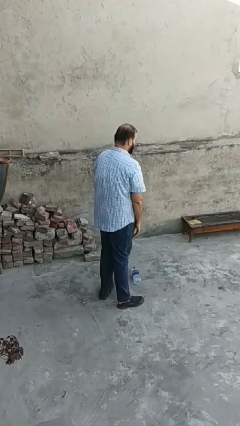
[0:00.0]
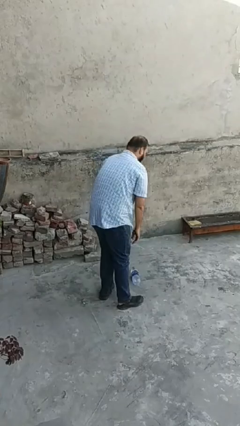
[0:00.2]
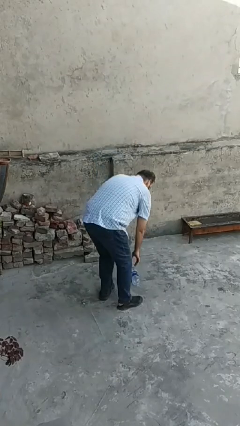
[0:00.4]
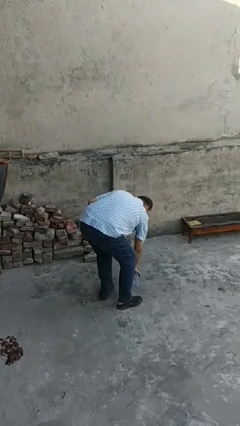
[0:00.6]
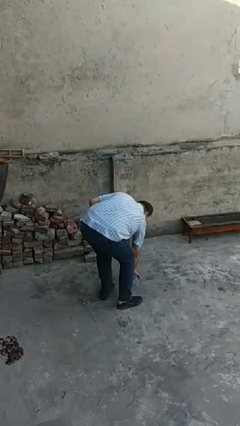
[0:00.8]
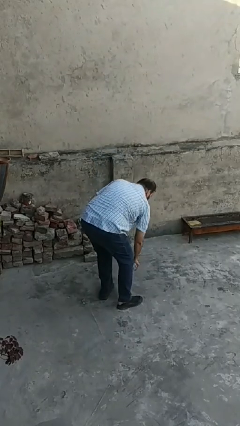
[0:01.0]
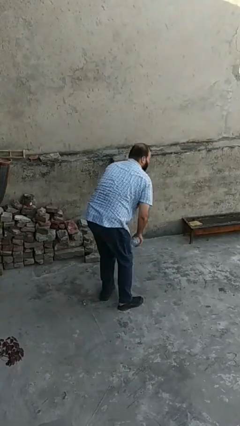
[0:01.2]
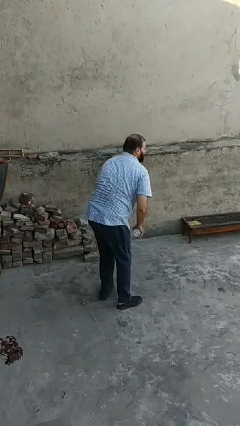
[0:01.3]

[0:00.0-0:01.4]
person picks up object from floor

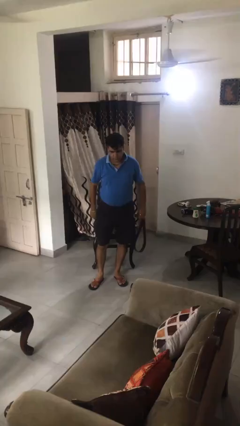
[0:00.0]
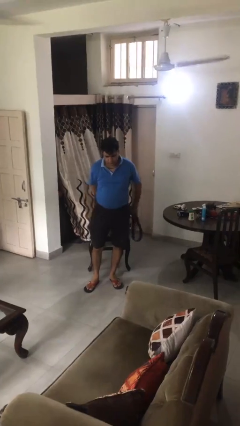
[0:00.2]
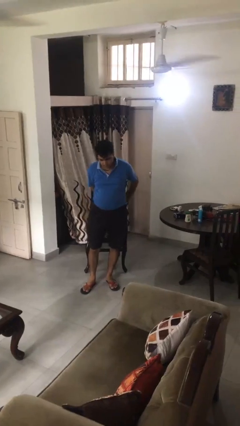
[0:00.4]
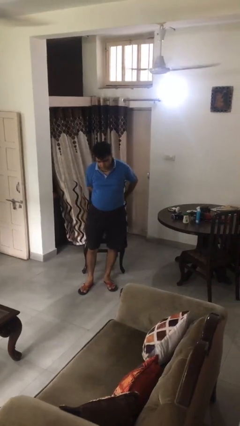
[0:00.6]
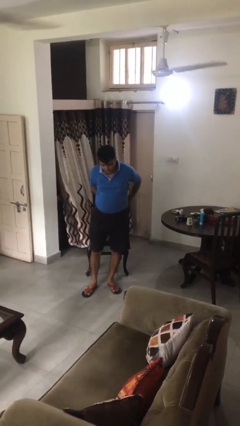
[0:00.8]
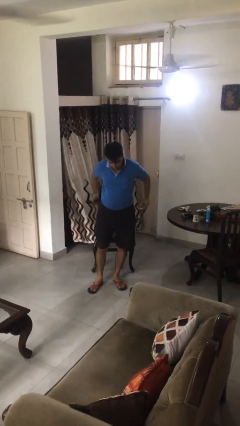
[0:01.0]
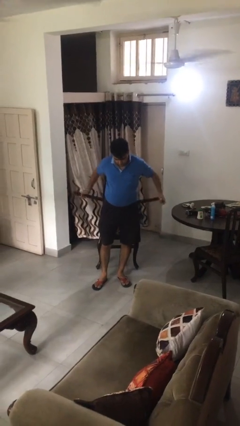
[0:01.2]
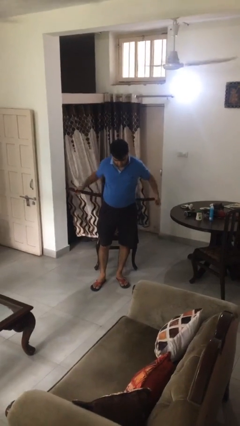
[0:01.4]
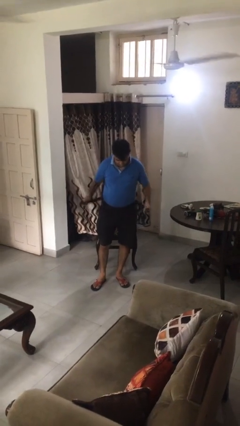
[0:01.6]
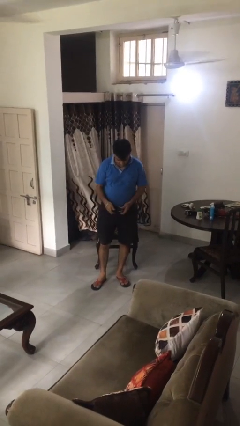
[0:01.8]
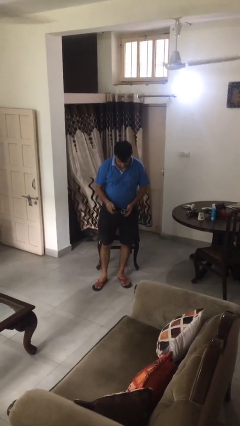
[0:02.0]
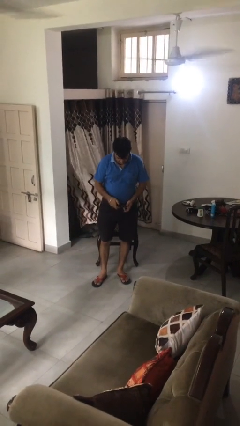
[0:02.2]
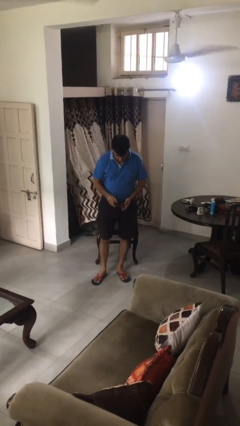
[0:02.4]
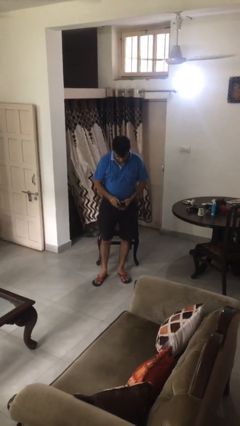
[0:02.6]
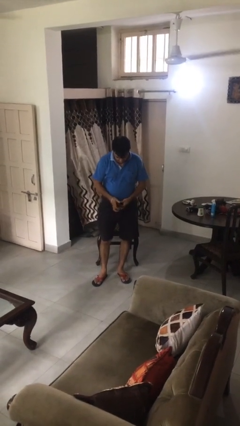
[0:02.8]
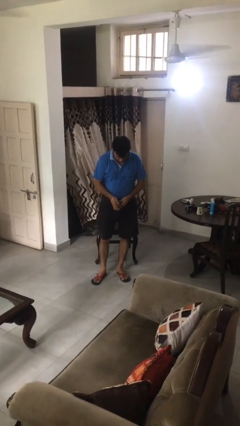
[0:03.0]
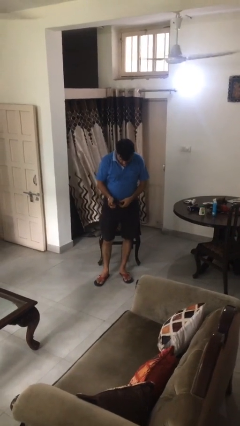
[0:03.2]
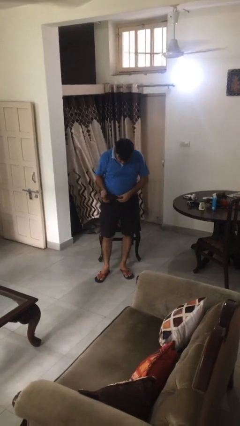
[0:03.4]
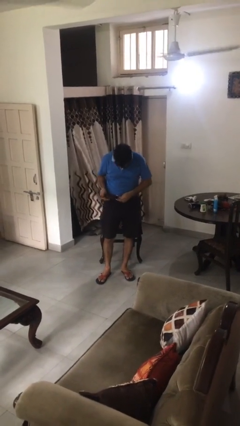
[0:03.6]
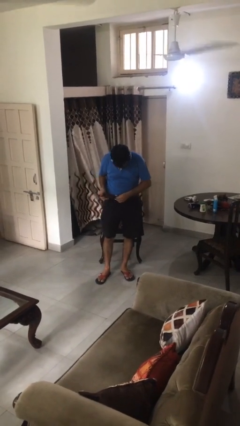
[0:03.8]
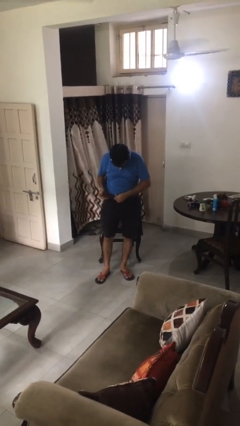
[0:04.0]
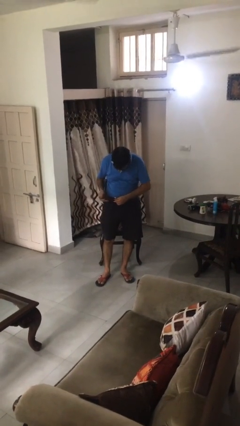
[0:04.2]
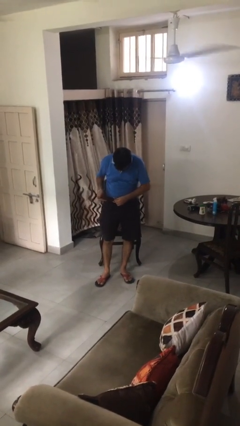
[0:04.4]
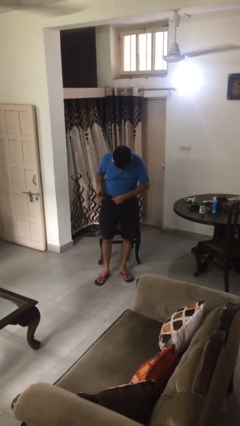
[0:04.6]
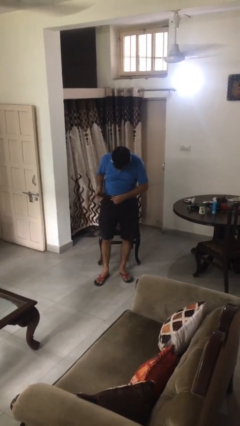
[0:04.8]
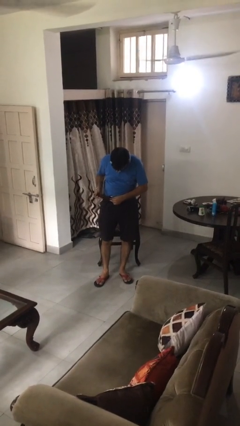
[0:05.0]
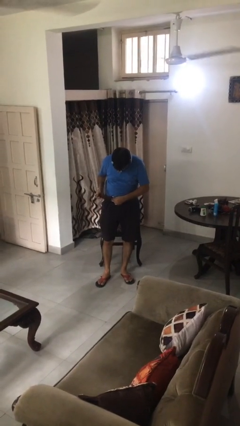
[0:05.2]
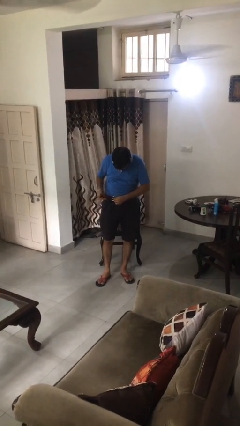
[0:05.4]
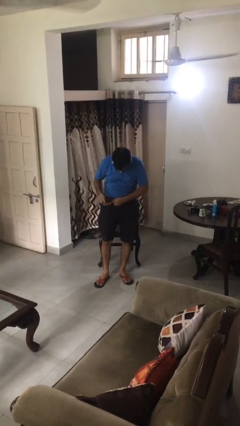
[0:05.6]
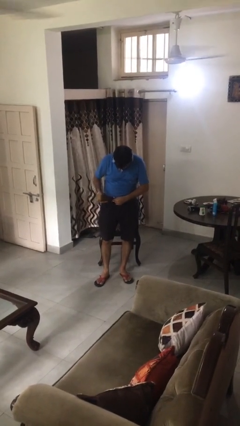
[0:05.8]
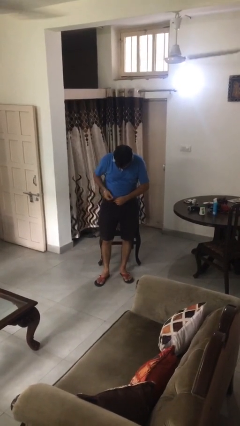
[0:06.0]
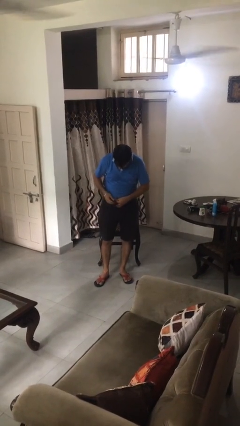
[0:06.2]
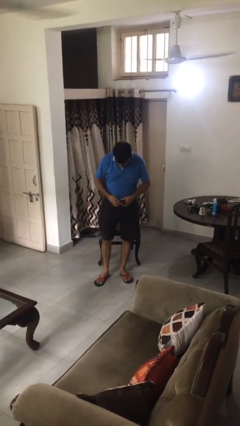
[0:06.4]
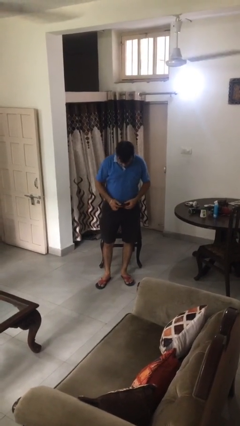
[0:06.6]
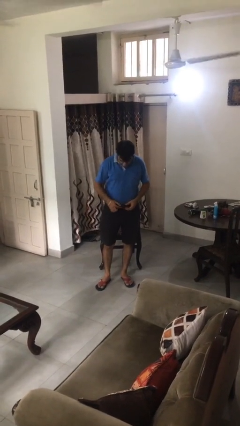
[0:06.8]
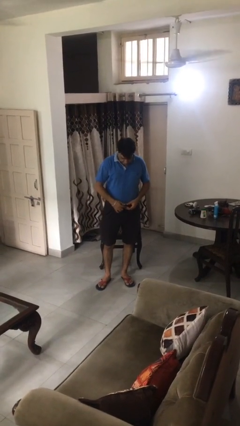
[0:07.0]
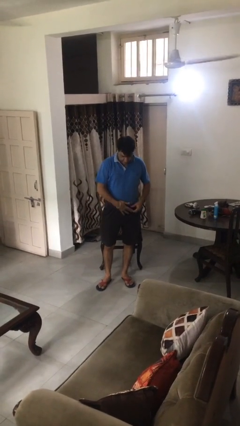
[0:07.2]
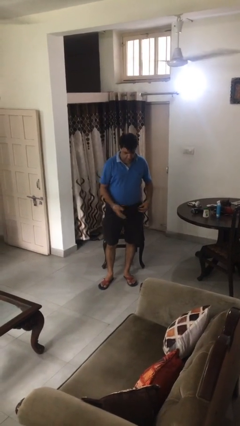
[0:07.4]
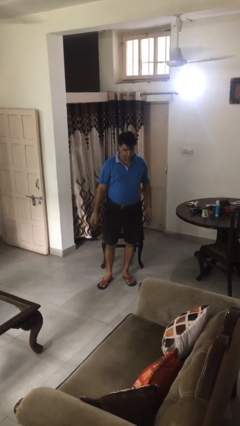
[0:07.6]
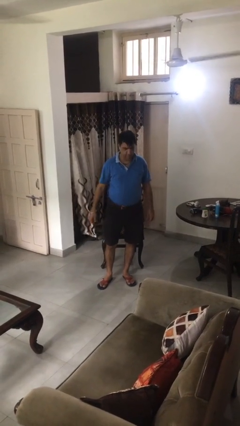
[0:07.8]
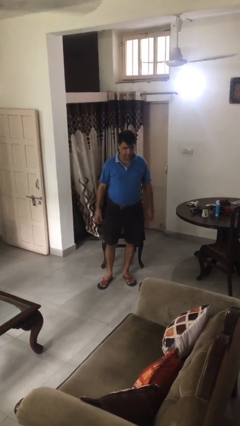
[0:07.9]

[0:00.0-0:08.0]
person puts on belt

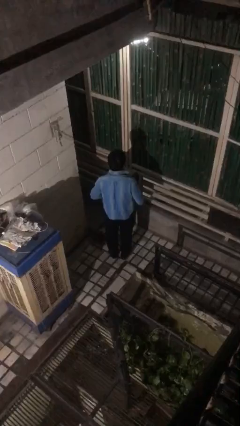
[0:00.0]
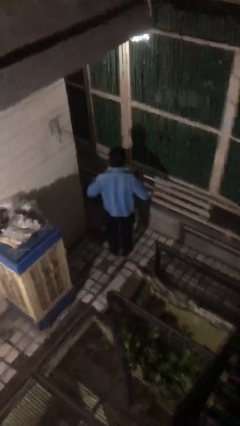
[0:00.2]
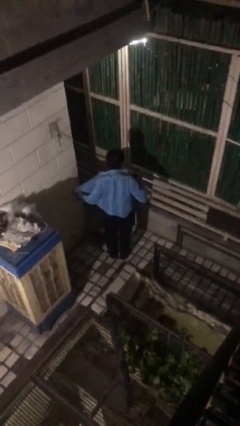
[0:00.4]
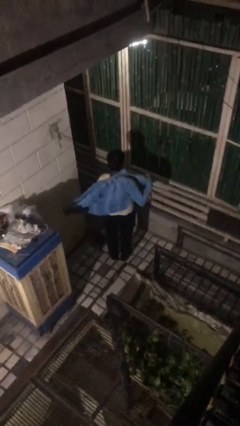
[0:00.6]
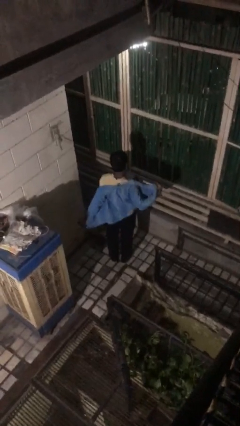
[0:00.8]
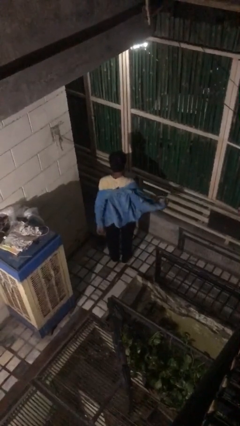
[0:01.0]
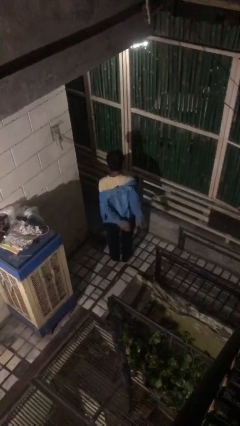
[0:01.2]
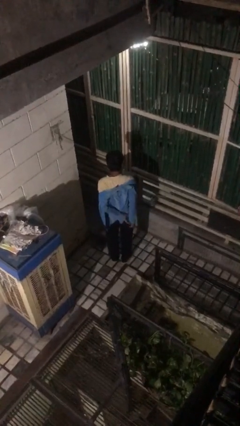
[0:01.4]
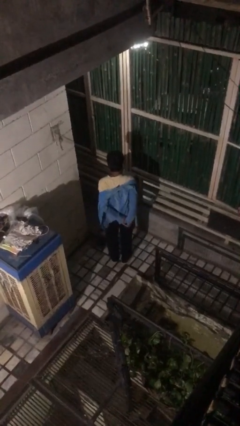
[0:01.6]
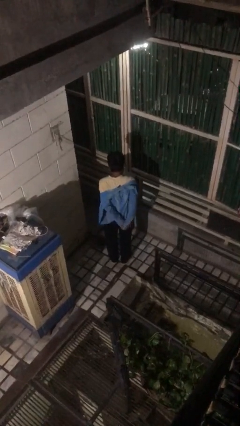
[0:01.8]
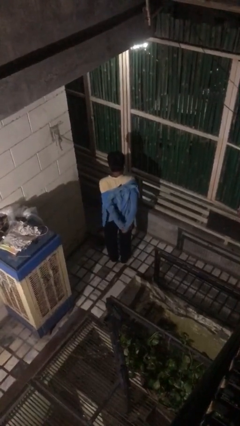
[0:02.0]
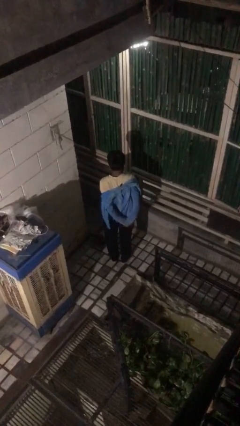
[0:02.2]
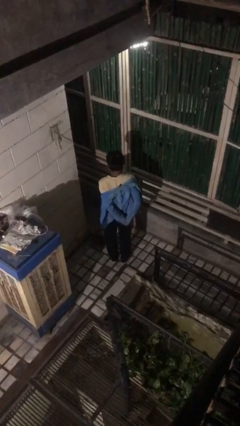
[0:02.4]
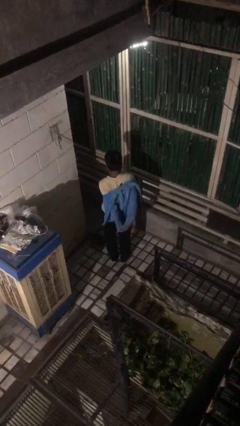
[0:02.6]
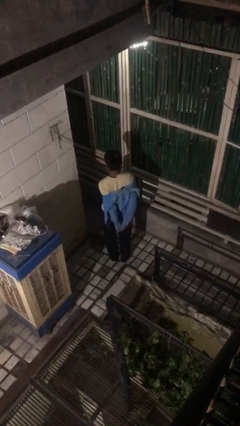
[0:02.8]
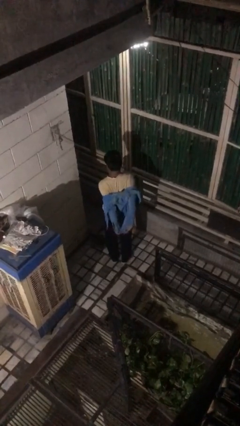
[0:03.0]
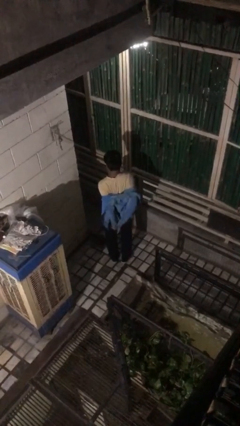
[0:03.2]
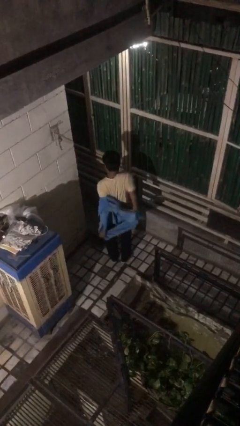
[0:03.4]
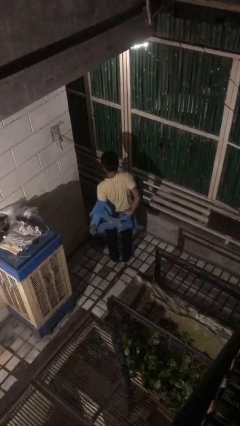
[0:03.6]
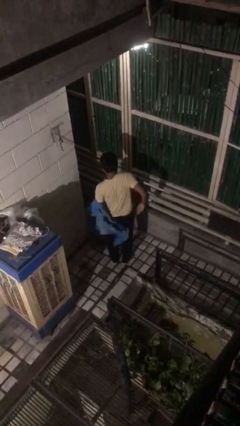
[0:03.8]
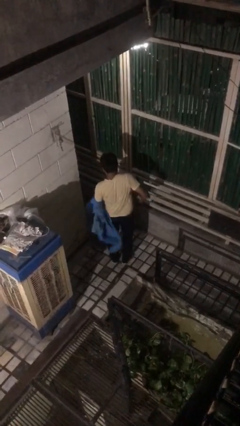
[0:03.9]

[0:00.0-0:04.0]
person takes off shirt

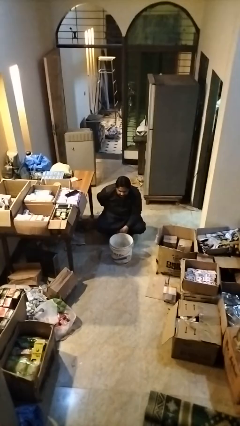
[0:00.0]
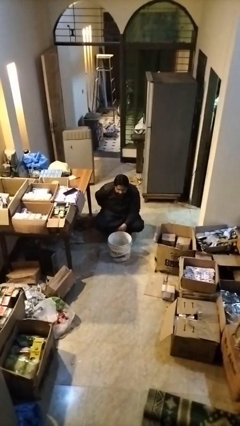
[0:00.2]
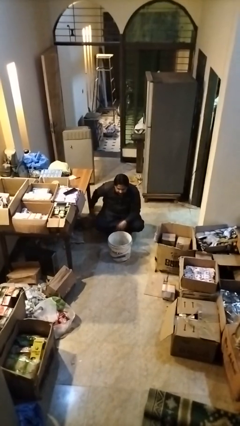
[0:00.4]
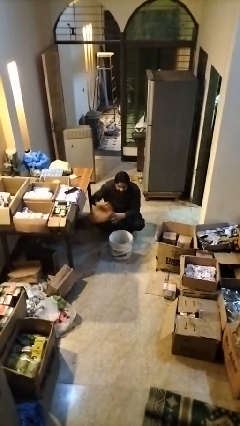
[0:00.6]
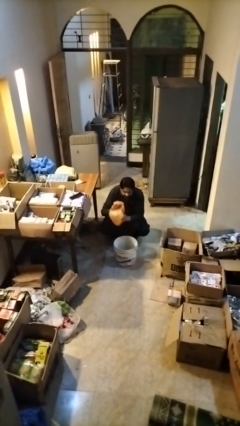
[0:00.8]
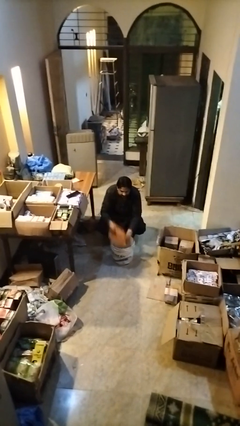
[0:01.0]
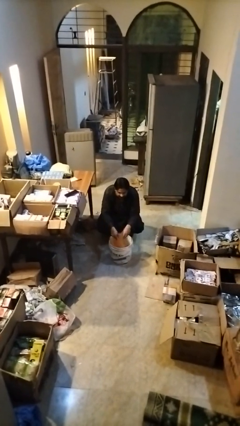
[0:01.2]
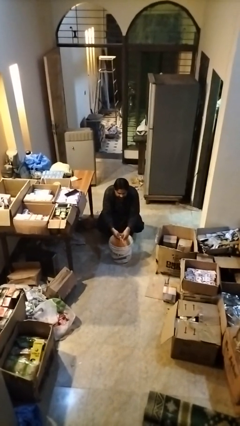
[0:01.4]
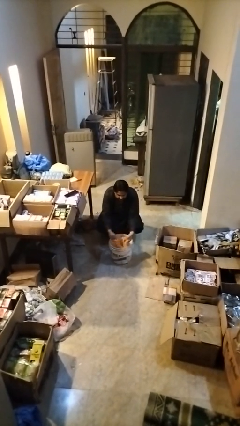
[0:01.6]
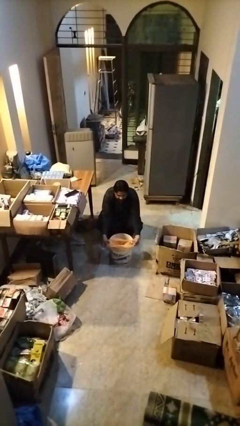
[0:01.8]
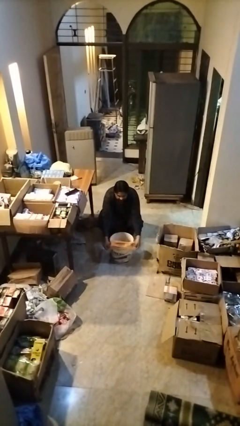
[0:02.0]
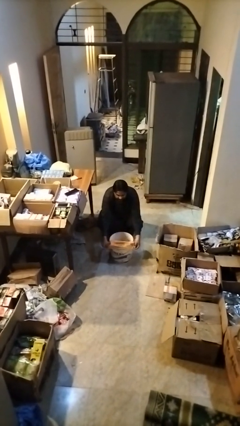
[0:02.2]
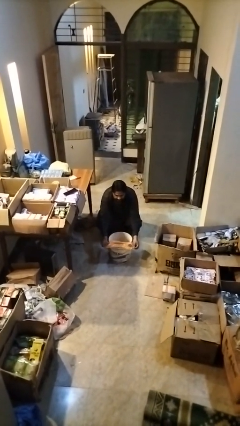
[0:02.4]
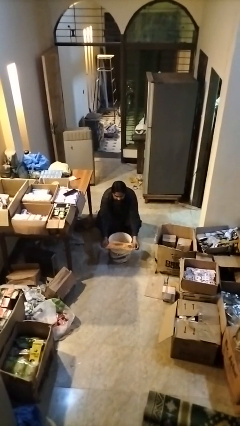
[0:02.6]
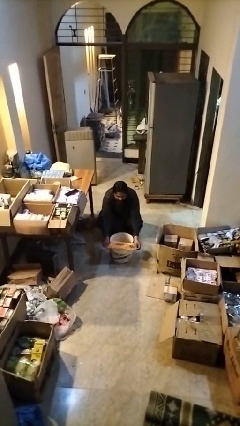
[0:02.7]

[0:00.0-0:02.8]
person inserts trashbag into trashcan

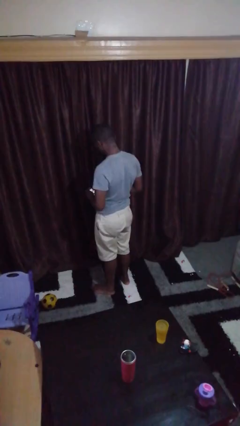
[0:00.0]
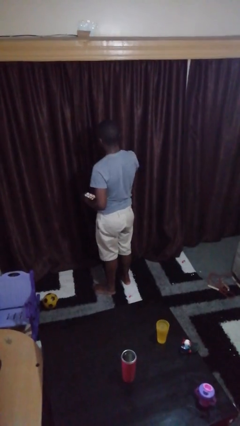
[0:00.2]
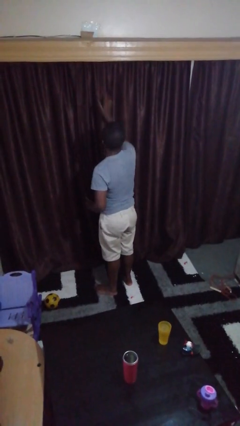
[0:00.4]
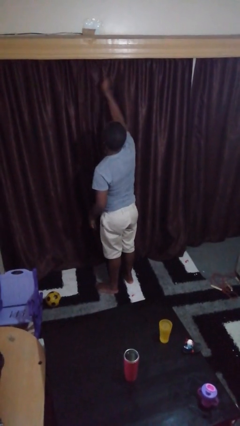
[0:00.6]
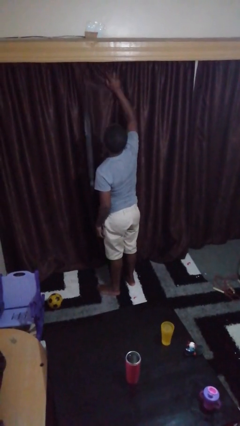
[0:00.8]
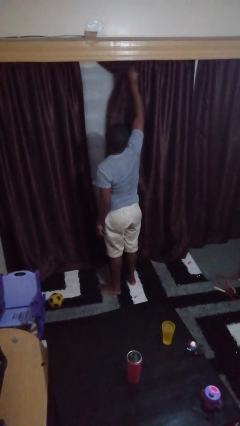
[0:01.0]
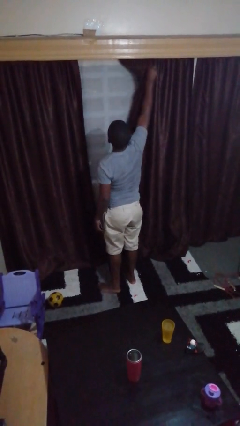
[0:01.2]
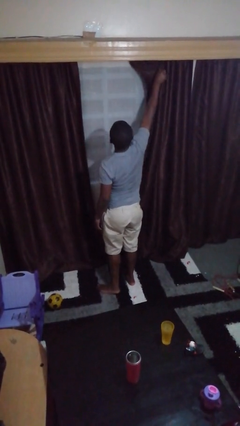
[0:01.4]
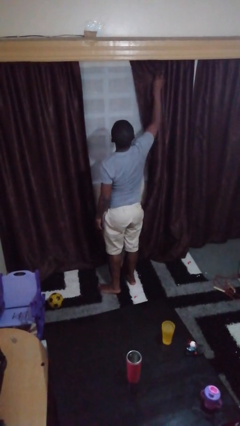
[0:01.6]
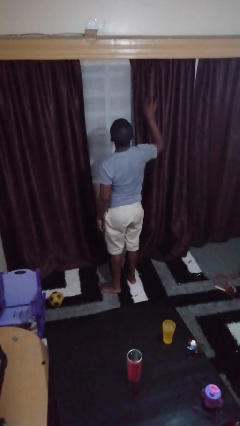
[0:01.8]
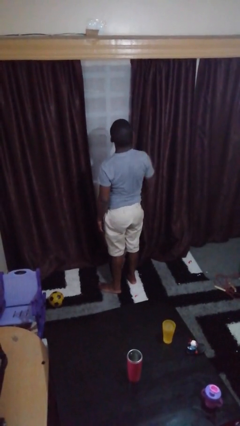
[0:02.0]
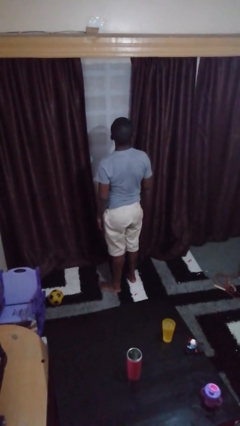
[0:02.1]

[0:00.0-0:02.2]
person opens curtains
